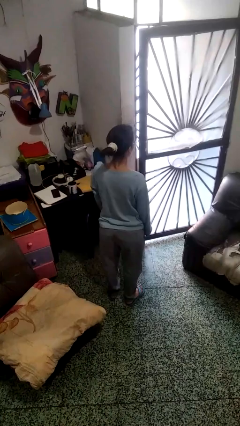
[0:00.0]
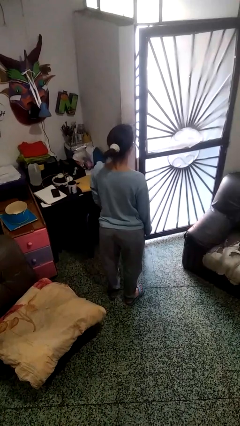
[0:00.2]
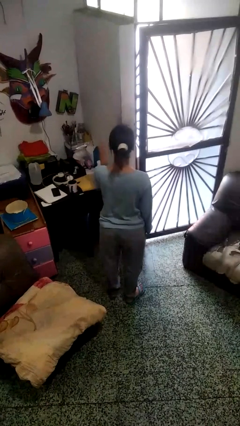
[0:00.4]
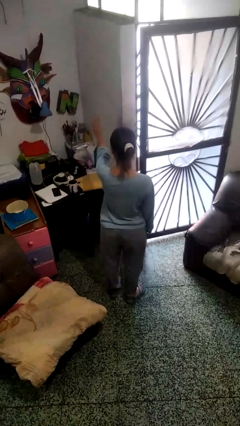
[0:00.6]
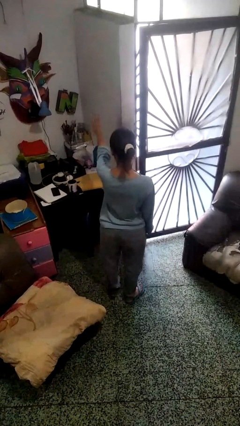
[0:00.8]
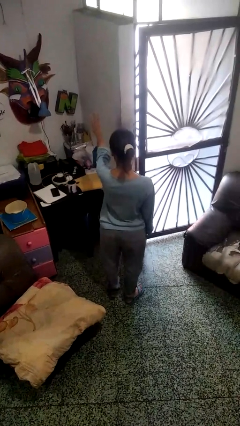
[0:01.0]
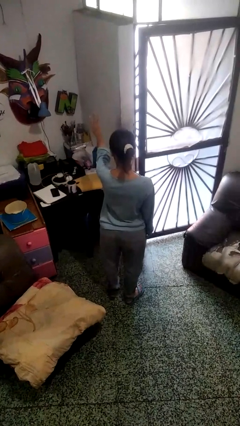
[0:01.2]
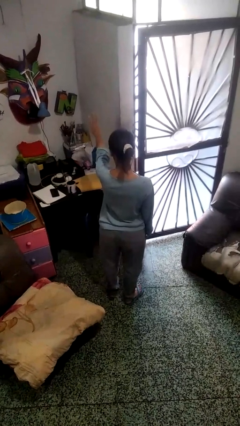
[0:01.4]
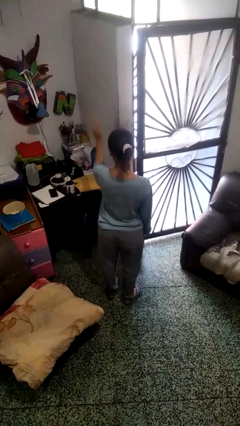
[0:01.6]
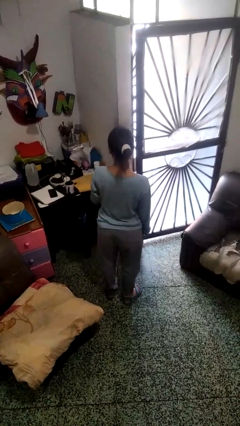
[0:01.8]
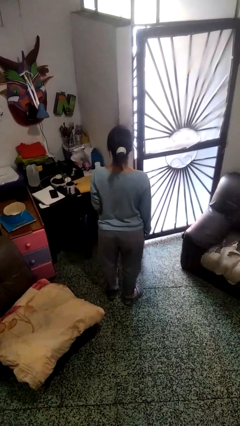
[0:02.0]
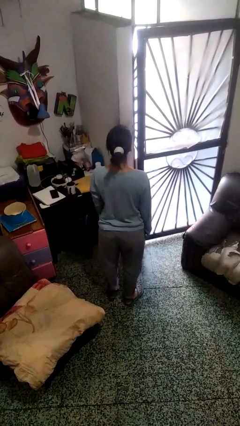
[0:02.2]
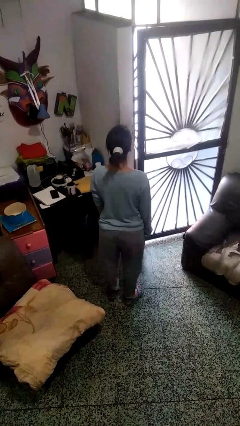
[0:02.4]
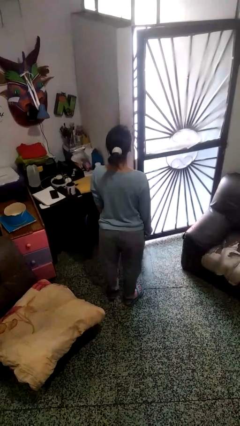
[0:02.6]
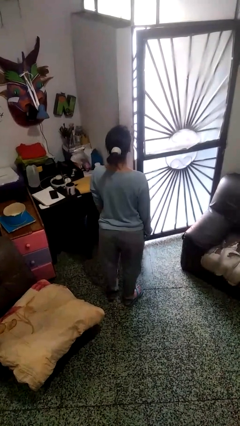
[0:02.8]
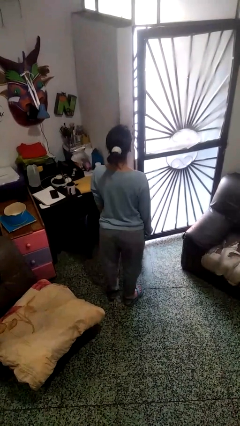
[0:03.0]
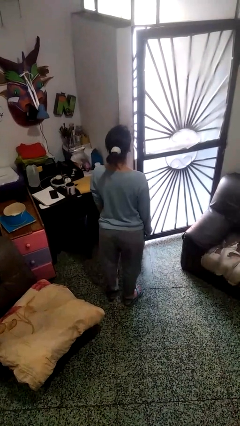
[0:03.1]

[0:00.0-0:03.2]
person gestures number three

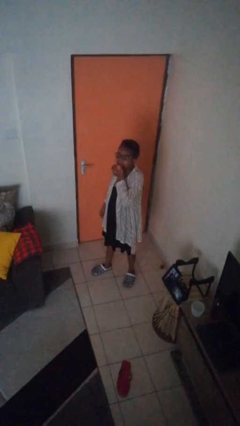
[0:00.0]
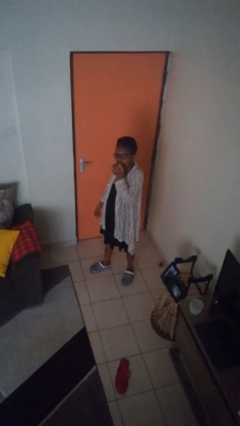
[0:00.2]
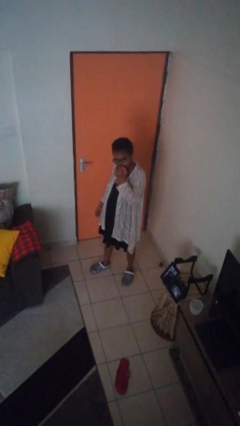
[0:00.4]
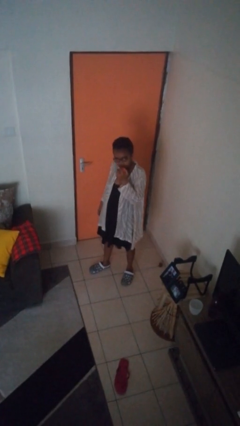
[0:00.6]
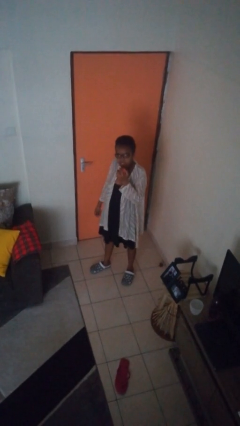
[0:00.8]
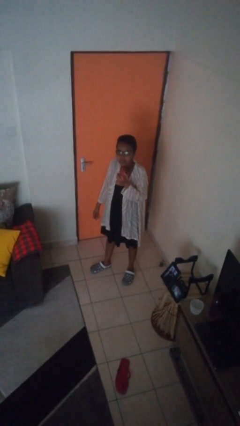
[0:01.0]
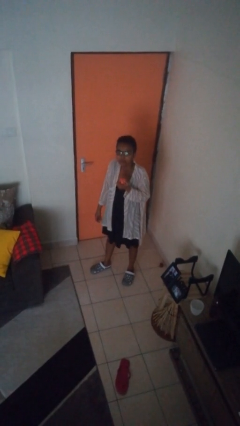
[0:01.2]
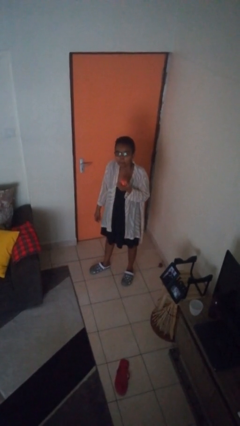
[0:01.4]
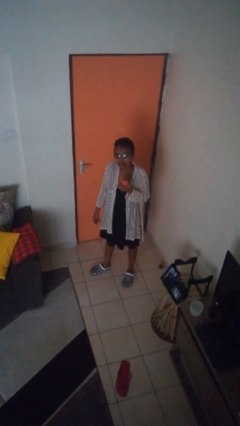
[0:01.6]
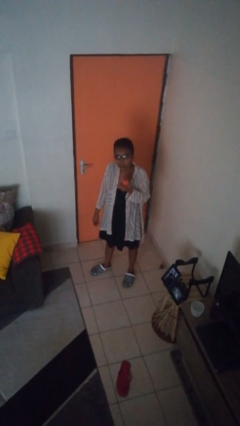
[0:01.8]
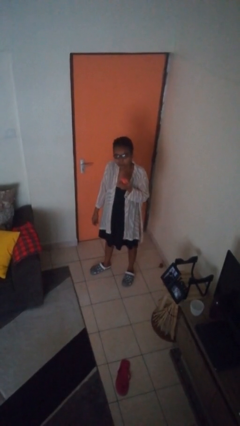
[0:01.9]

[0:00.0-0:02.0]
person eats apple

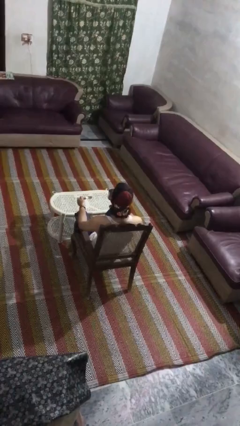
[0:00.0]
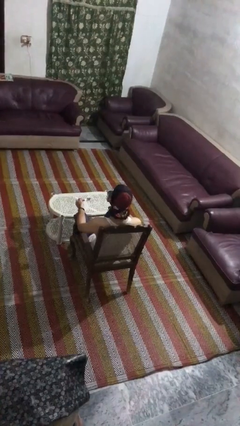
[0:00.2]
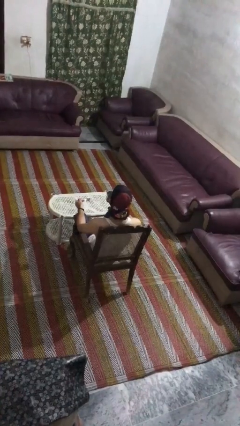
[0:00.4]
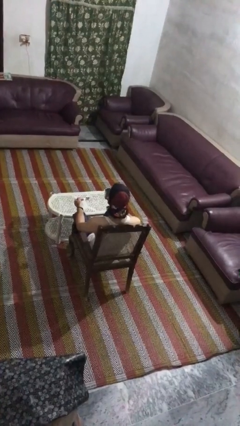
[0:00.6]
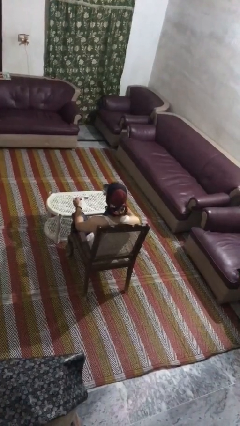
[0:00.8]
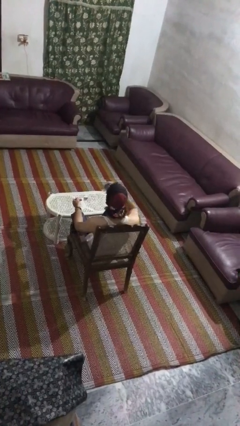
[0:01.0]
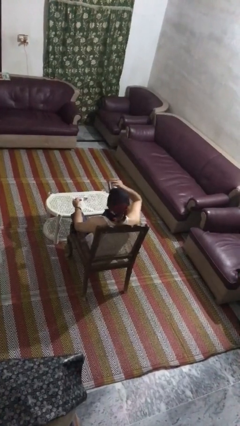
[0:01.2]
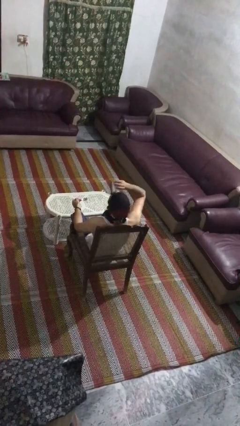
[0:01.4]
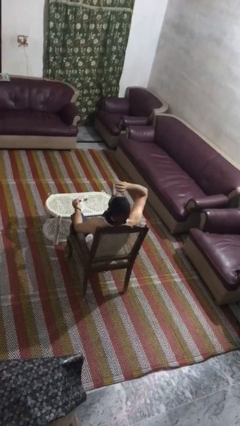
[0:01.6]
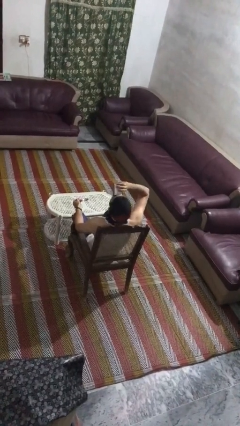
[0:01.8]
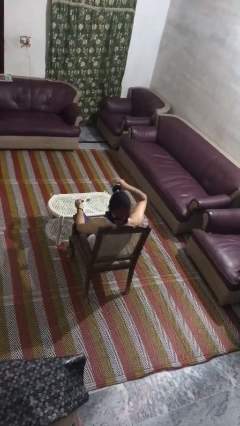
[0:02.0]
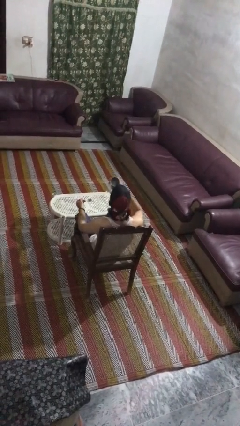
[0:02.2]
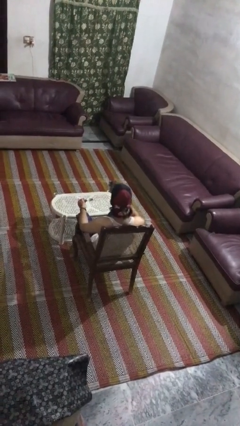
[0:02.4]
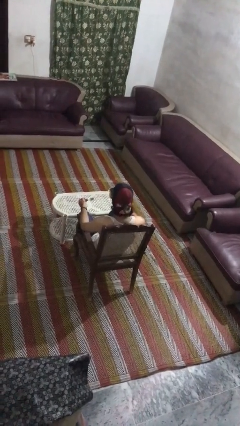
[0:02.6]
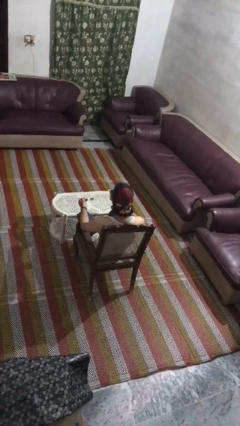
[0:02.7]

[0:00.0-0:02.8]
person drinks from mug

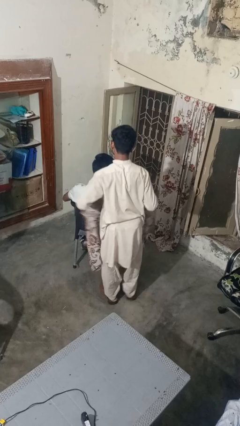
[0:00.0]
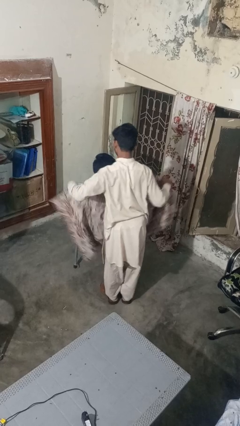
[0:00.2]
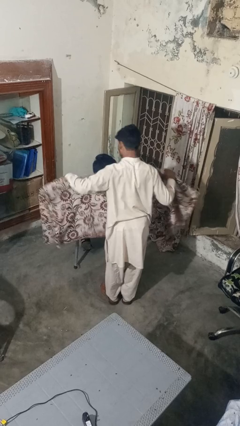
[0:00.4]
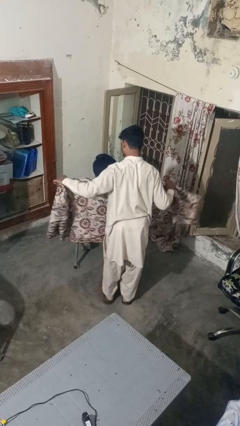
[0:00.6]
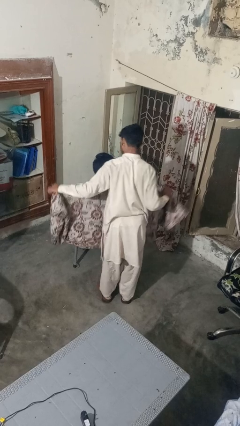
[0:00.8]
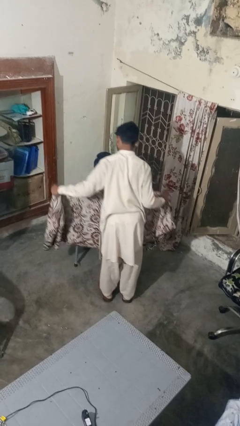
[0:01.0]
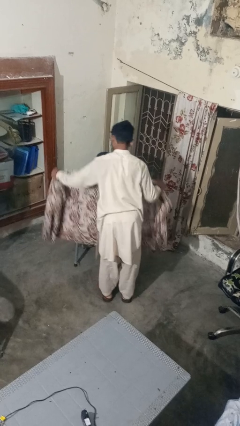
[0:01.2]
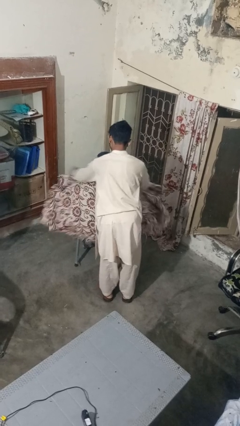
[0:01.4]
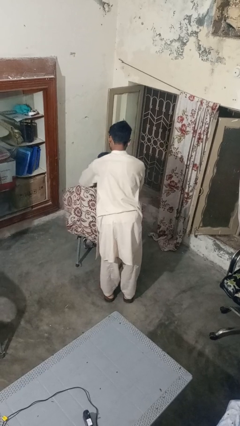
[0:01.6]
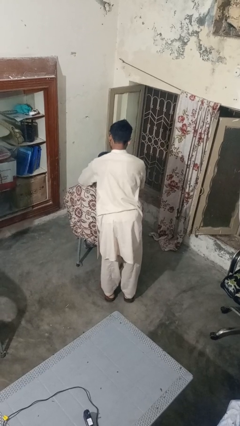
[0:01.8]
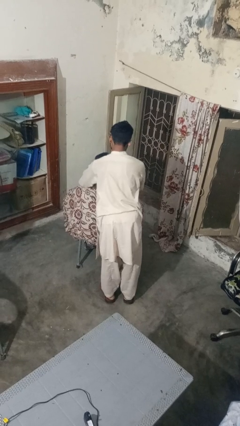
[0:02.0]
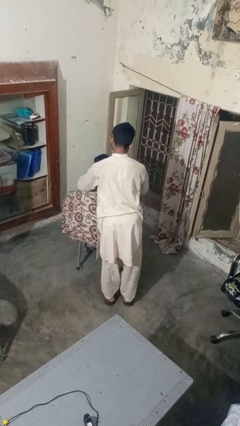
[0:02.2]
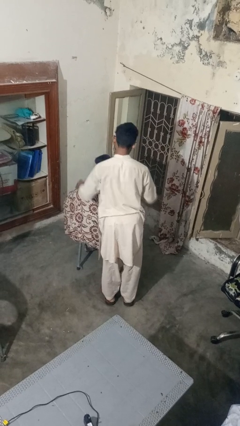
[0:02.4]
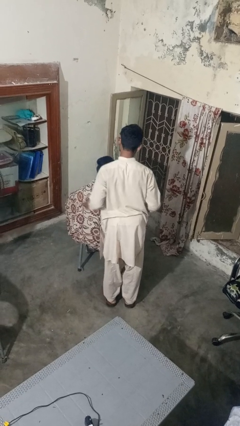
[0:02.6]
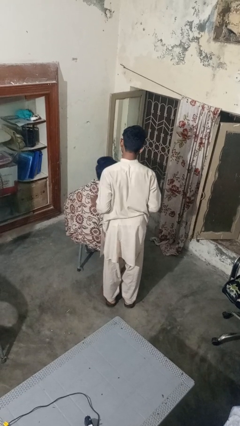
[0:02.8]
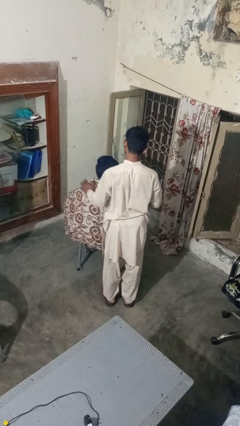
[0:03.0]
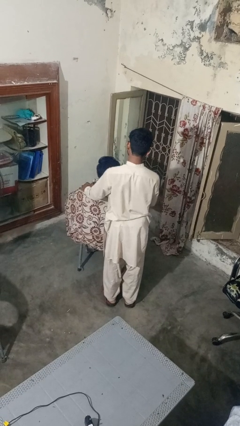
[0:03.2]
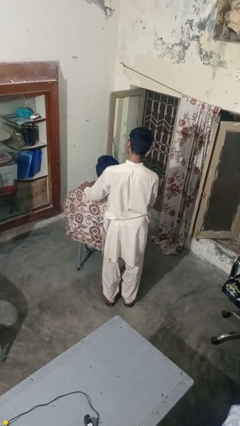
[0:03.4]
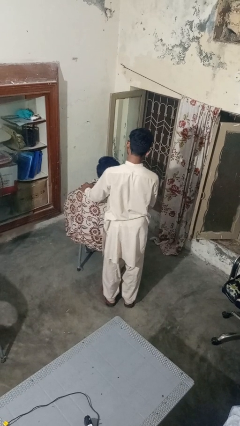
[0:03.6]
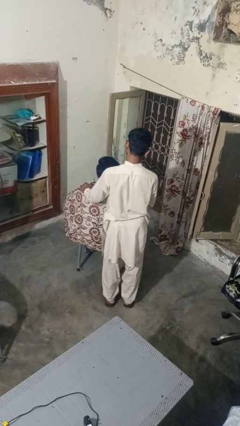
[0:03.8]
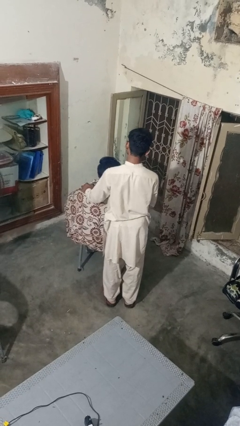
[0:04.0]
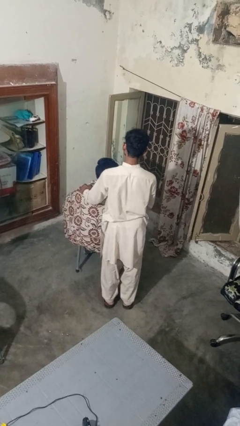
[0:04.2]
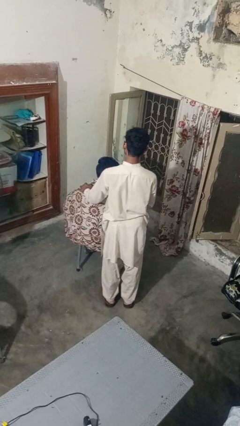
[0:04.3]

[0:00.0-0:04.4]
person covers friend with blanket

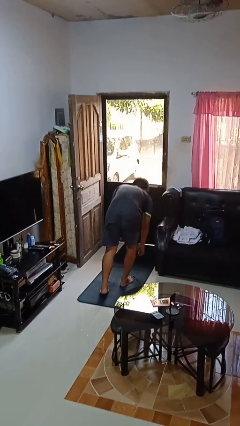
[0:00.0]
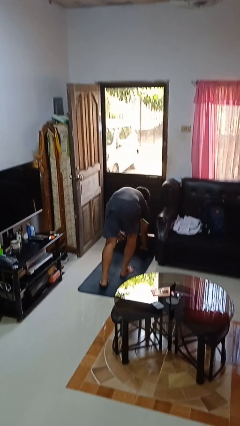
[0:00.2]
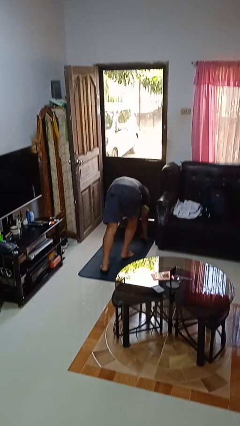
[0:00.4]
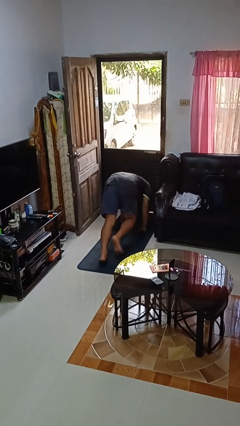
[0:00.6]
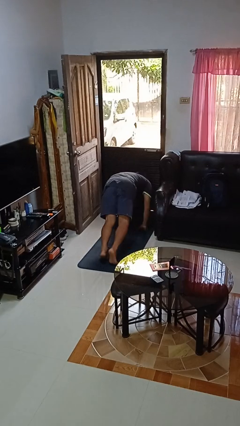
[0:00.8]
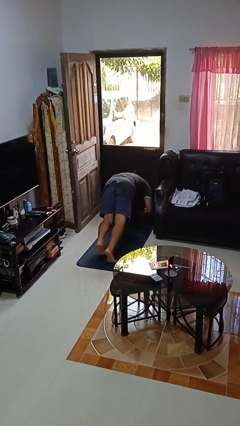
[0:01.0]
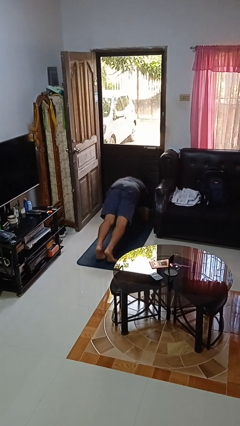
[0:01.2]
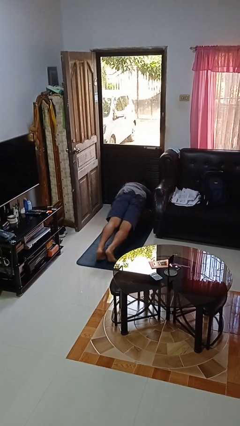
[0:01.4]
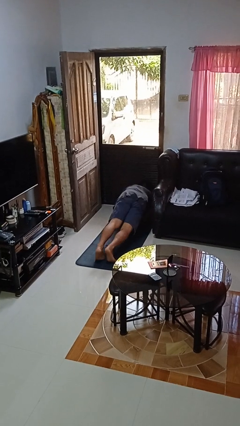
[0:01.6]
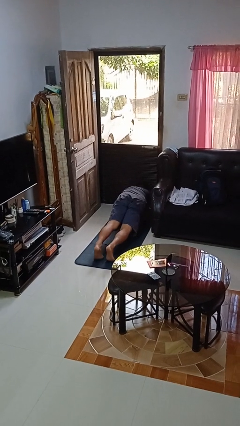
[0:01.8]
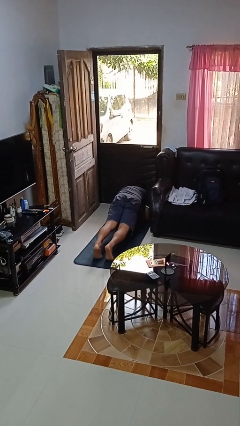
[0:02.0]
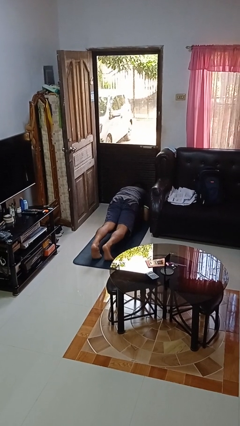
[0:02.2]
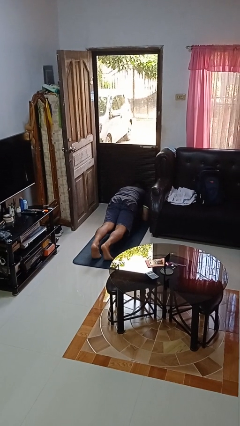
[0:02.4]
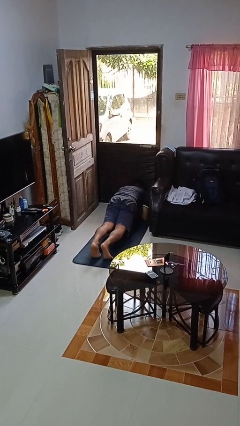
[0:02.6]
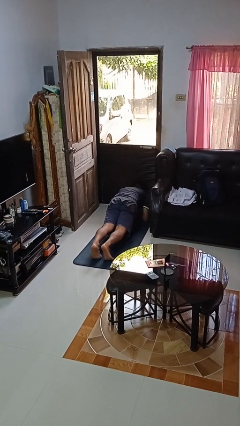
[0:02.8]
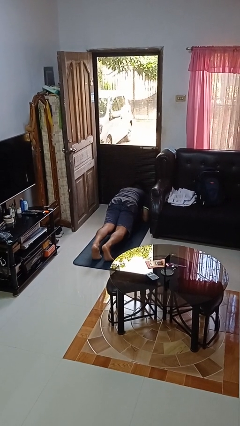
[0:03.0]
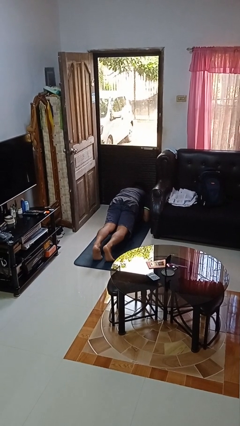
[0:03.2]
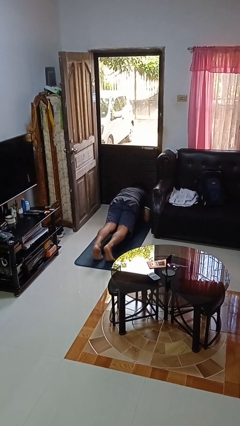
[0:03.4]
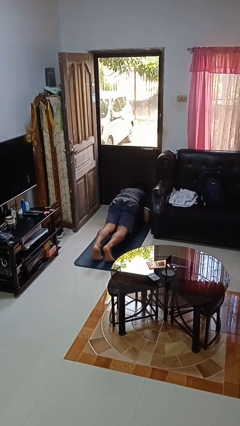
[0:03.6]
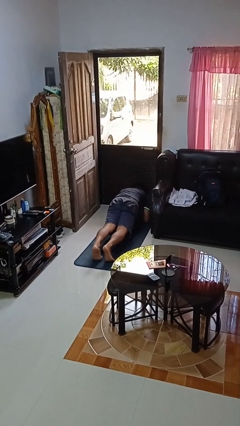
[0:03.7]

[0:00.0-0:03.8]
person exercises with plank

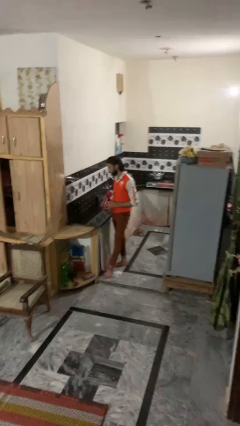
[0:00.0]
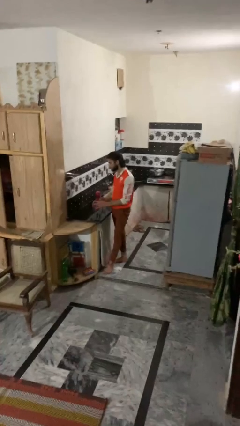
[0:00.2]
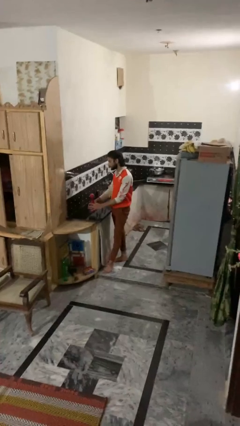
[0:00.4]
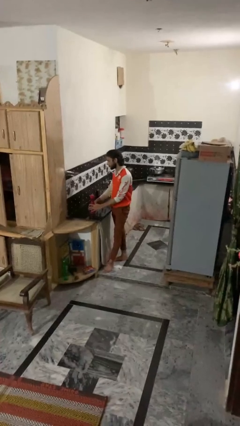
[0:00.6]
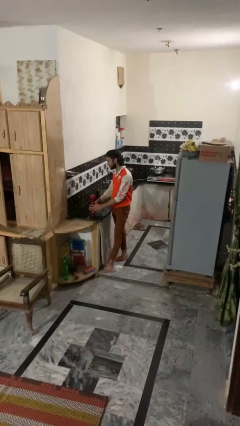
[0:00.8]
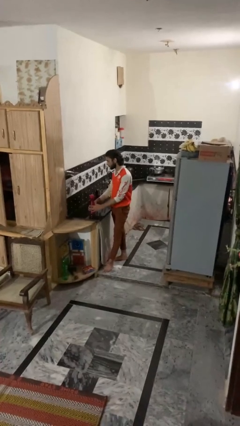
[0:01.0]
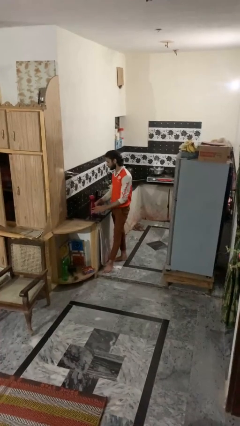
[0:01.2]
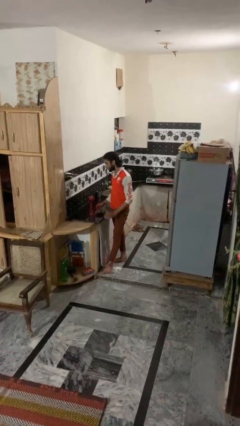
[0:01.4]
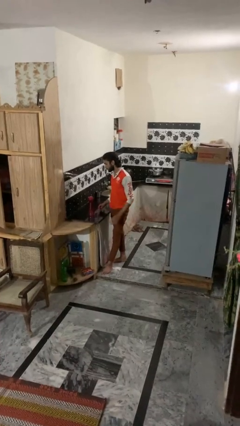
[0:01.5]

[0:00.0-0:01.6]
person puts down object on countertop
